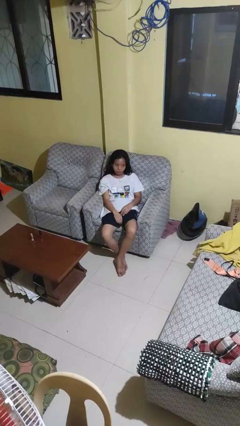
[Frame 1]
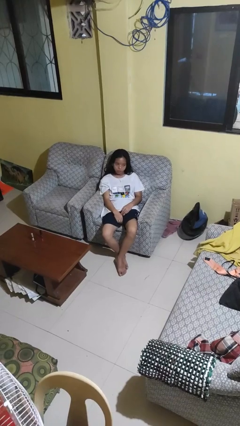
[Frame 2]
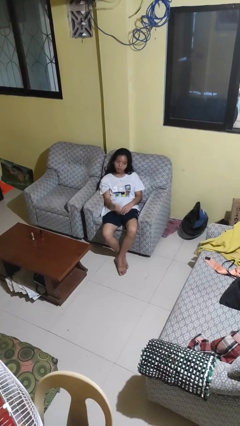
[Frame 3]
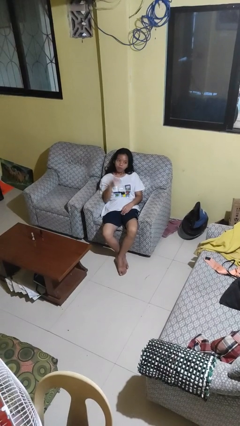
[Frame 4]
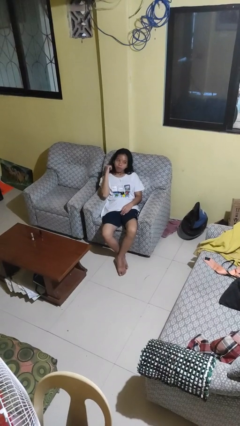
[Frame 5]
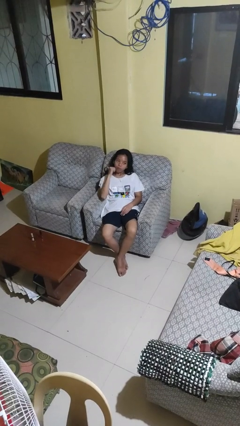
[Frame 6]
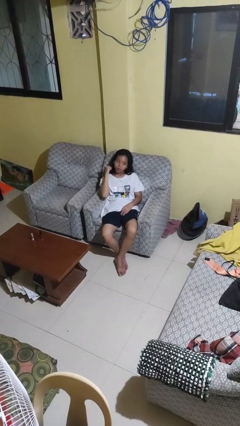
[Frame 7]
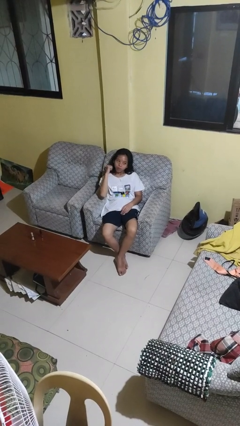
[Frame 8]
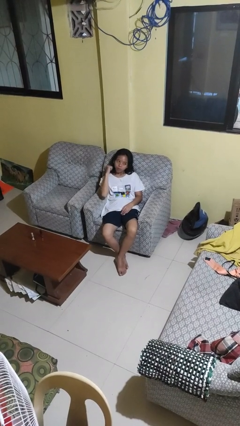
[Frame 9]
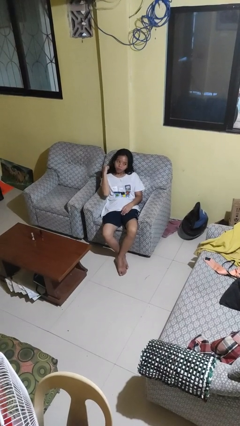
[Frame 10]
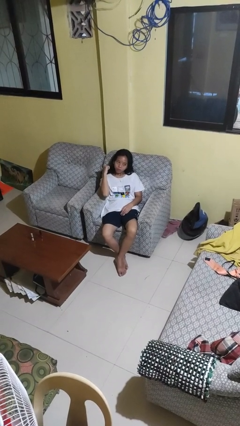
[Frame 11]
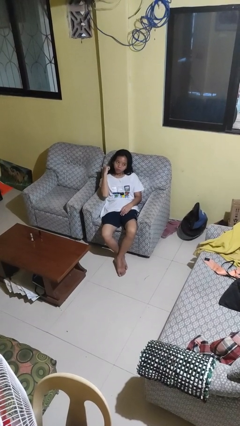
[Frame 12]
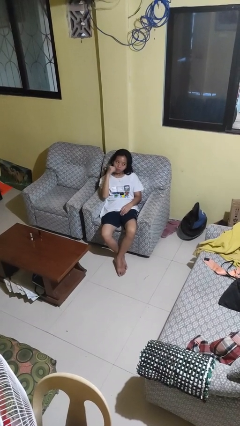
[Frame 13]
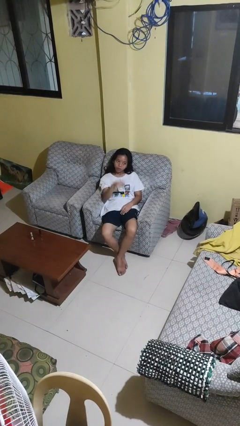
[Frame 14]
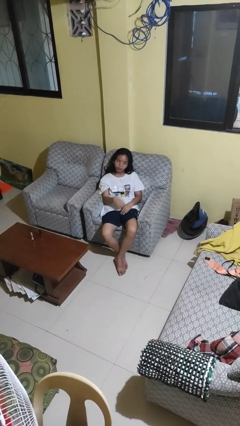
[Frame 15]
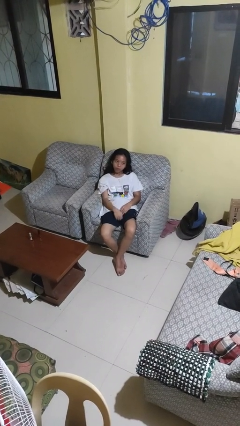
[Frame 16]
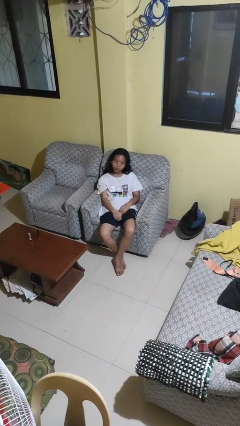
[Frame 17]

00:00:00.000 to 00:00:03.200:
person gestures behind me

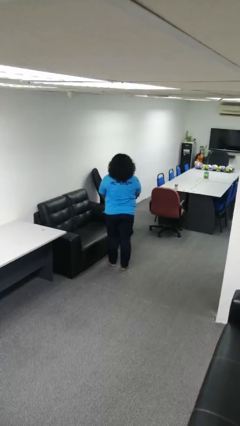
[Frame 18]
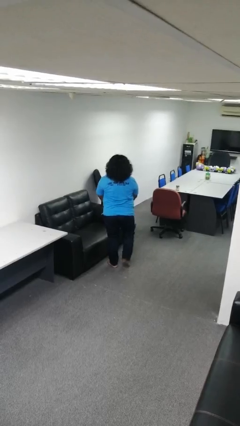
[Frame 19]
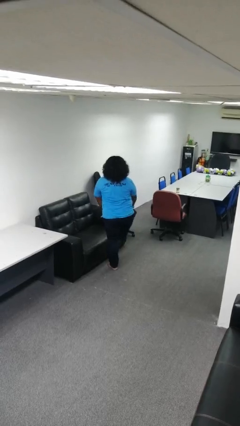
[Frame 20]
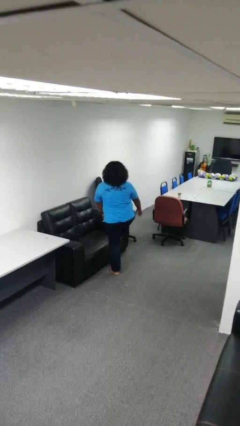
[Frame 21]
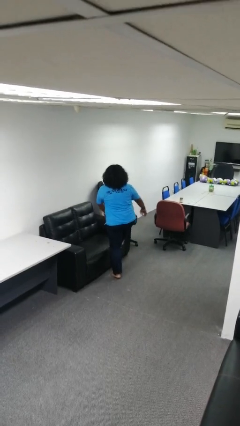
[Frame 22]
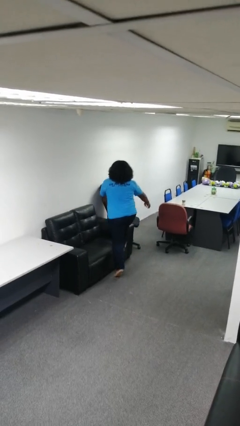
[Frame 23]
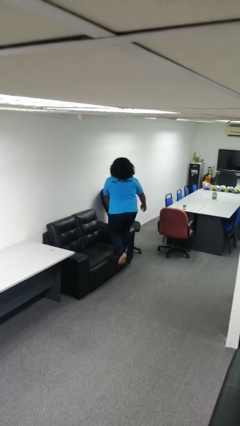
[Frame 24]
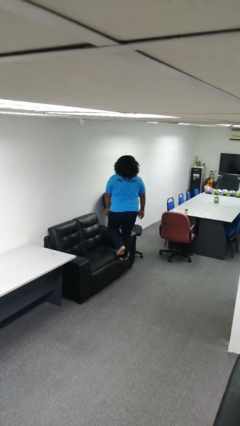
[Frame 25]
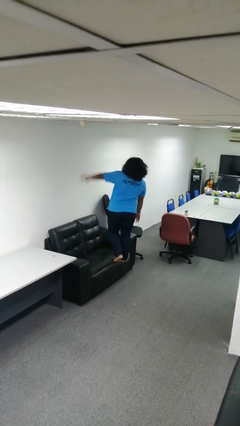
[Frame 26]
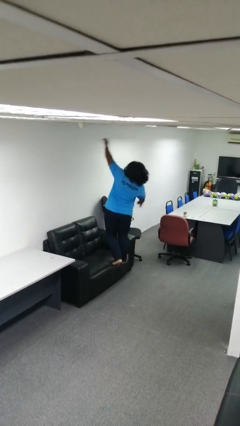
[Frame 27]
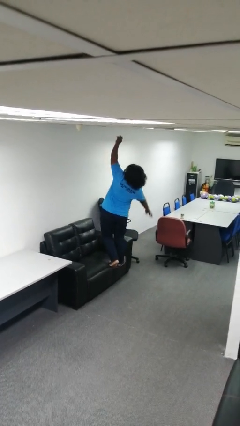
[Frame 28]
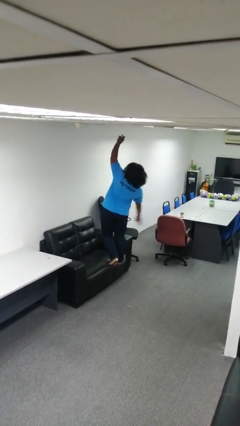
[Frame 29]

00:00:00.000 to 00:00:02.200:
person climbs on couch

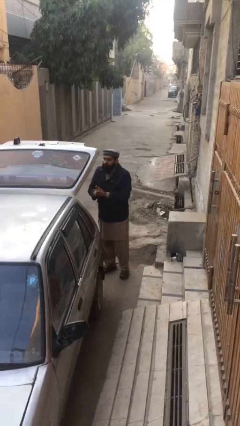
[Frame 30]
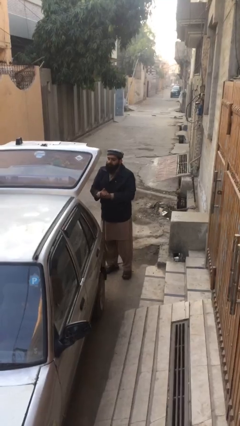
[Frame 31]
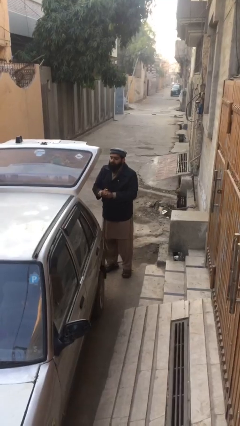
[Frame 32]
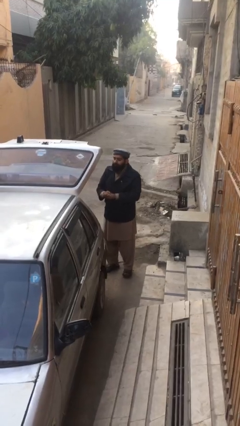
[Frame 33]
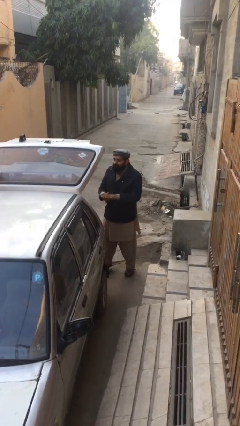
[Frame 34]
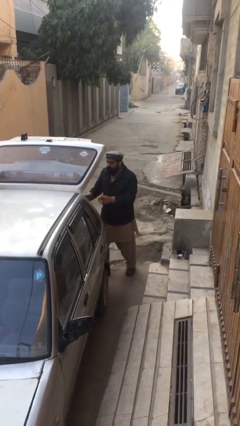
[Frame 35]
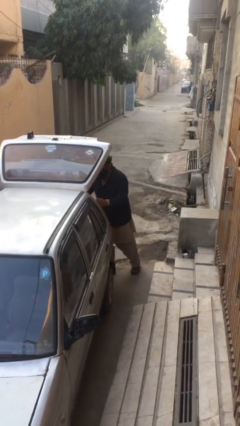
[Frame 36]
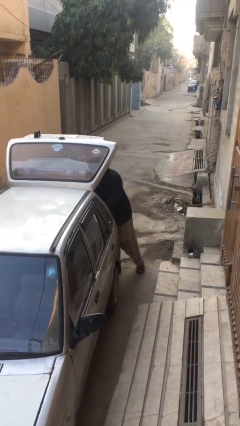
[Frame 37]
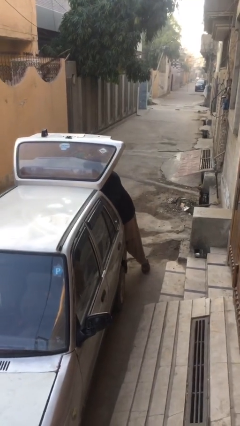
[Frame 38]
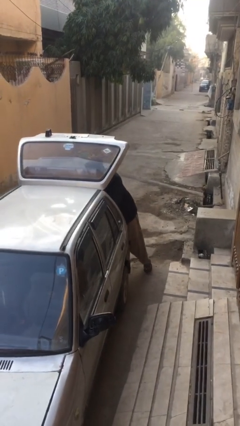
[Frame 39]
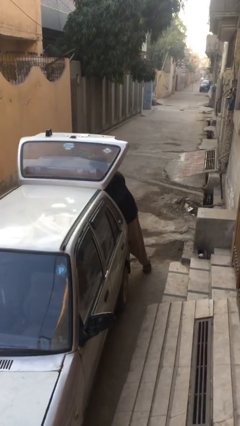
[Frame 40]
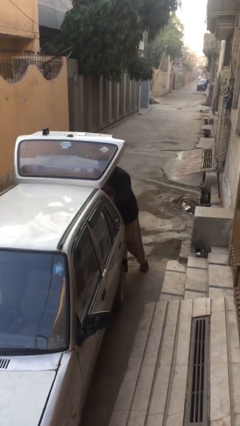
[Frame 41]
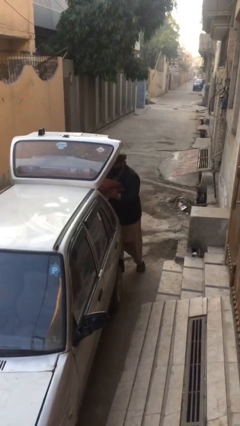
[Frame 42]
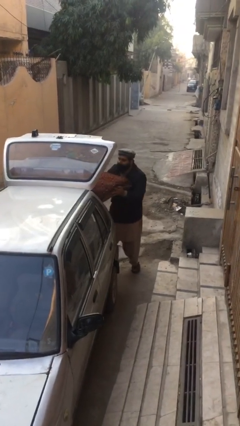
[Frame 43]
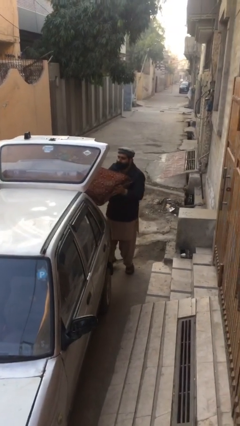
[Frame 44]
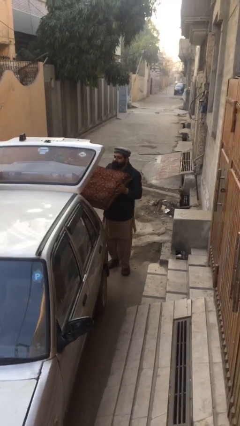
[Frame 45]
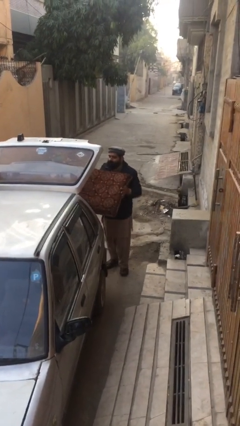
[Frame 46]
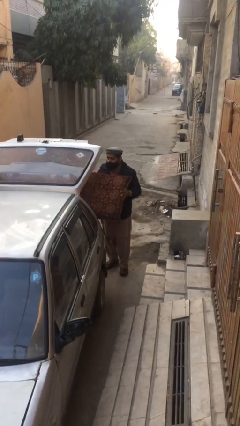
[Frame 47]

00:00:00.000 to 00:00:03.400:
person unloads car

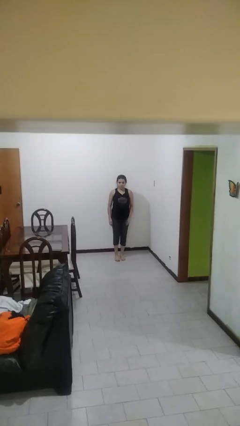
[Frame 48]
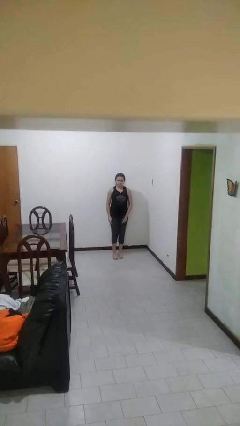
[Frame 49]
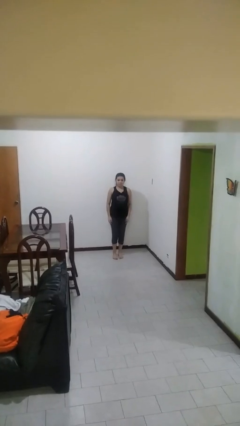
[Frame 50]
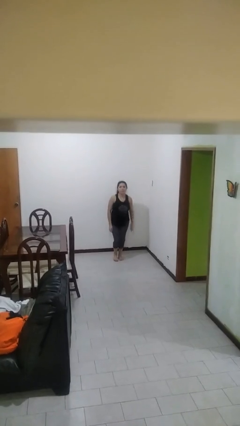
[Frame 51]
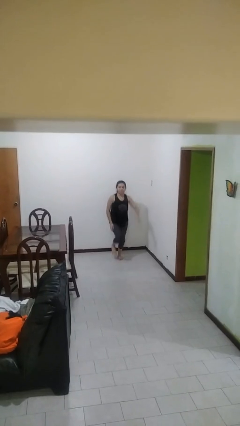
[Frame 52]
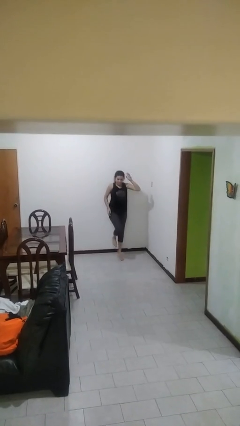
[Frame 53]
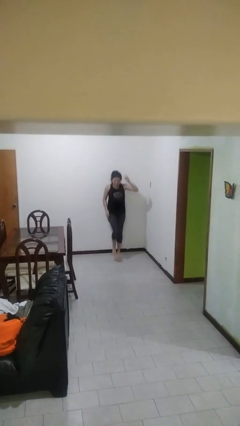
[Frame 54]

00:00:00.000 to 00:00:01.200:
person jumps

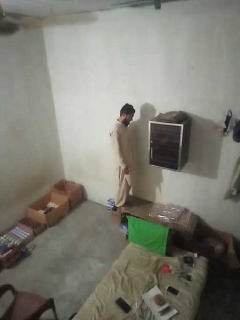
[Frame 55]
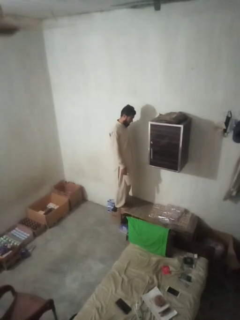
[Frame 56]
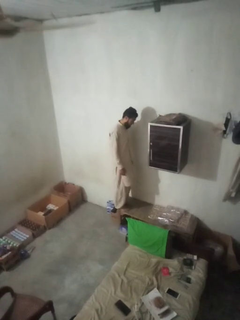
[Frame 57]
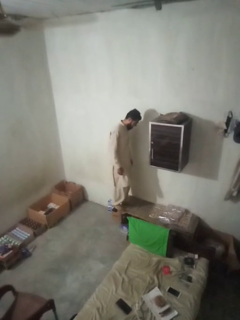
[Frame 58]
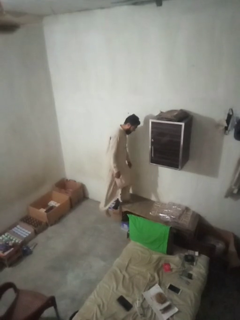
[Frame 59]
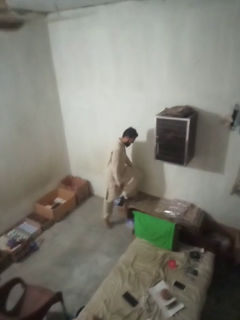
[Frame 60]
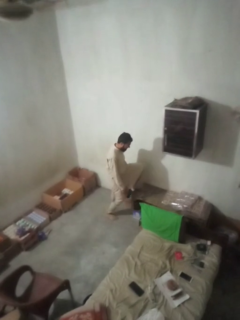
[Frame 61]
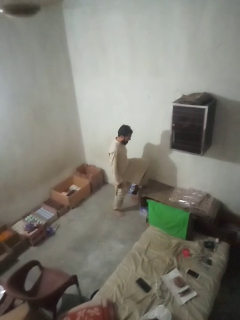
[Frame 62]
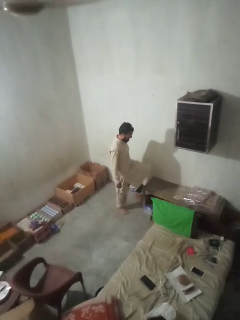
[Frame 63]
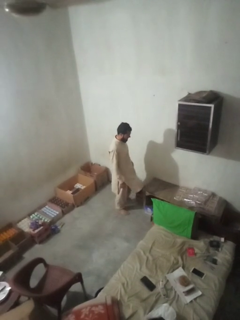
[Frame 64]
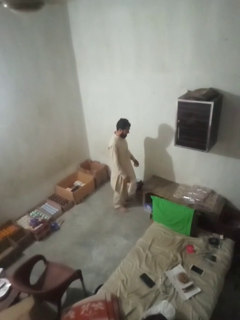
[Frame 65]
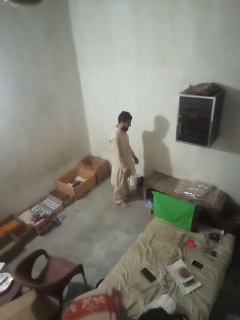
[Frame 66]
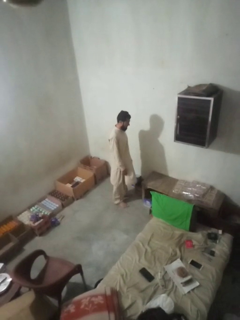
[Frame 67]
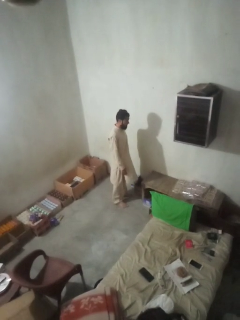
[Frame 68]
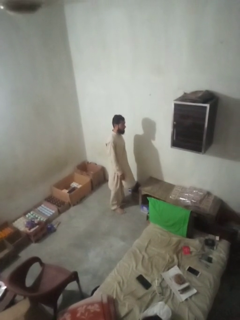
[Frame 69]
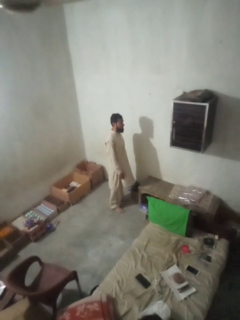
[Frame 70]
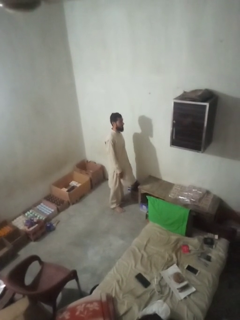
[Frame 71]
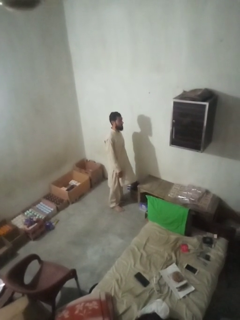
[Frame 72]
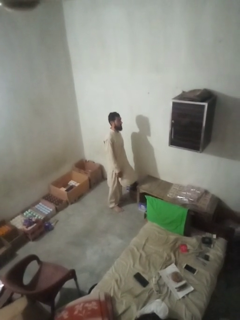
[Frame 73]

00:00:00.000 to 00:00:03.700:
person climbs off table

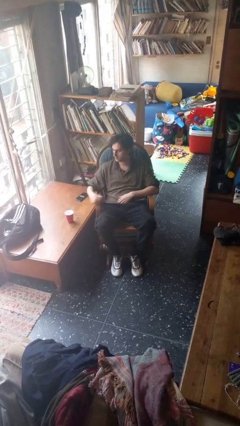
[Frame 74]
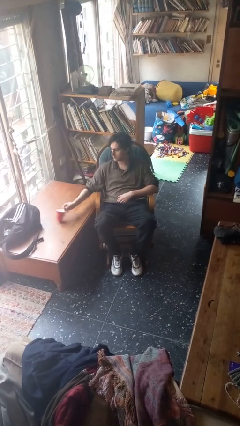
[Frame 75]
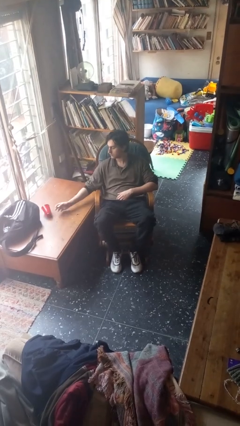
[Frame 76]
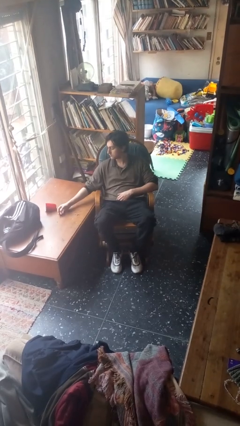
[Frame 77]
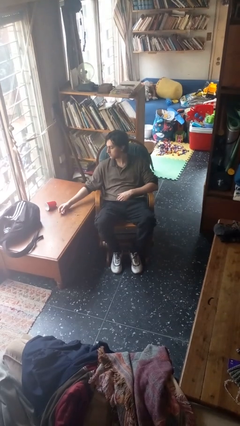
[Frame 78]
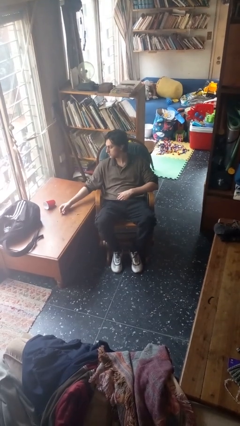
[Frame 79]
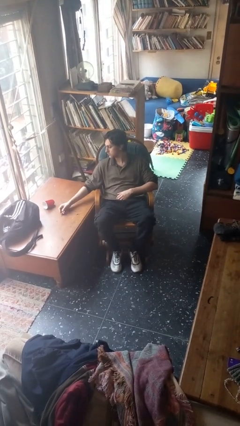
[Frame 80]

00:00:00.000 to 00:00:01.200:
person knocks over glass

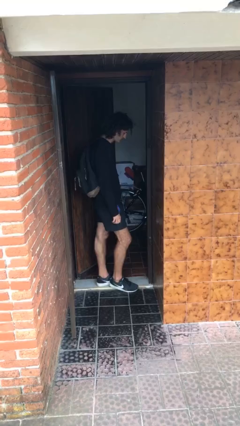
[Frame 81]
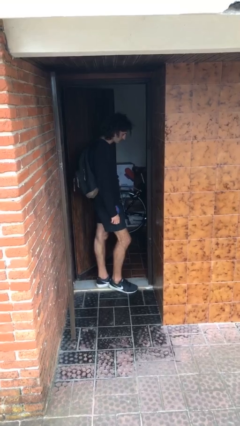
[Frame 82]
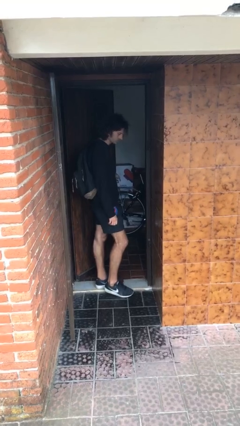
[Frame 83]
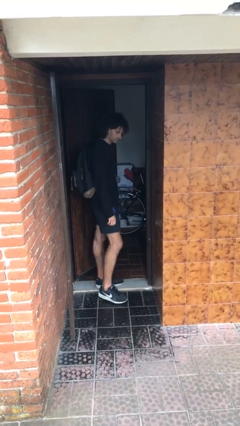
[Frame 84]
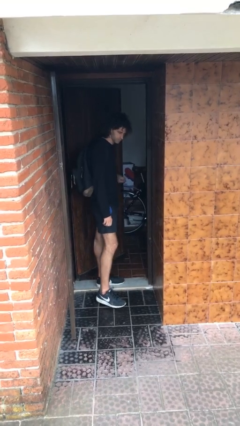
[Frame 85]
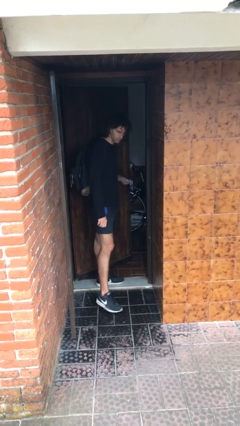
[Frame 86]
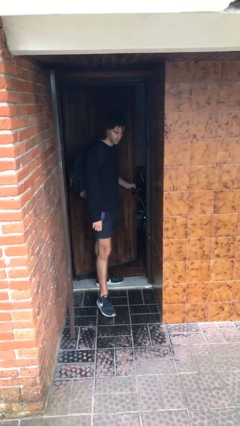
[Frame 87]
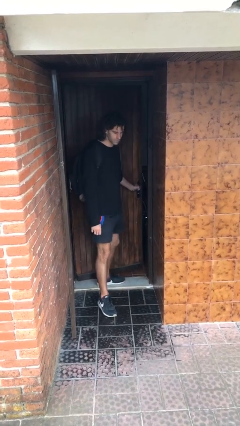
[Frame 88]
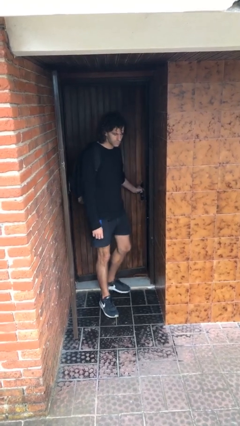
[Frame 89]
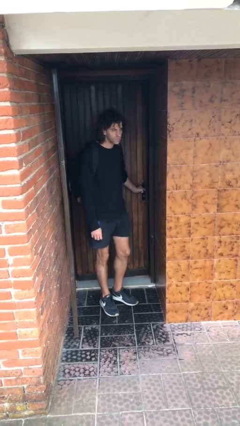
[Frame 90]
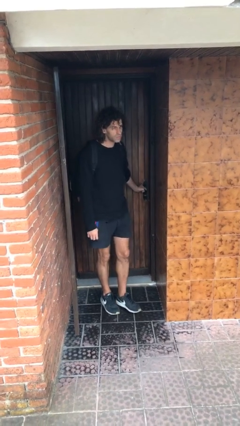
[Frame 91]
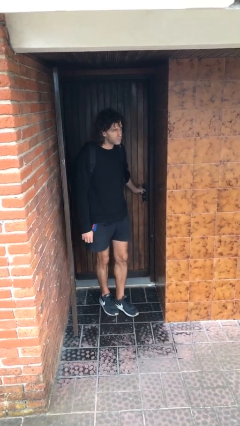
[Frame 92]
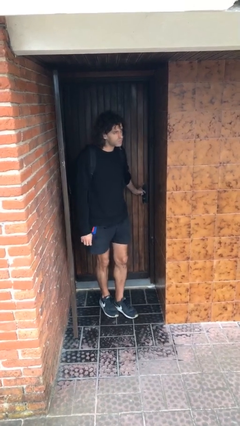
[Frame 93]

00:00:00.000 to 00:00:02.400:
person closes facility door

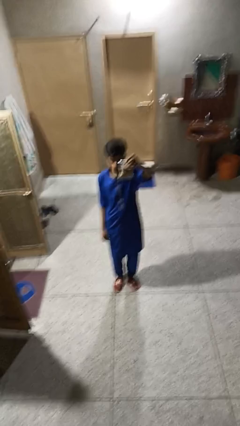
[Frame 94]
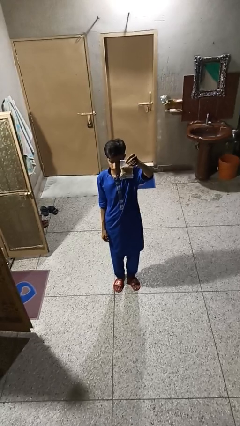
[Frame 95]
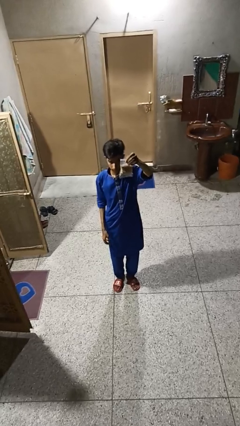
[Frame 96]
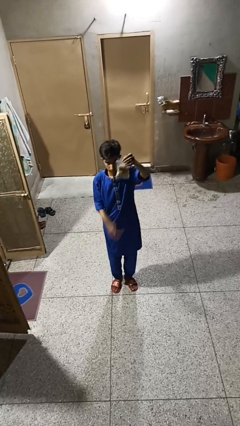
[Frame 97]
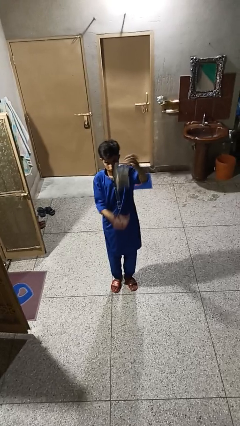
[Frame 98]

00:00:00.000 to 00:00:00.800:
person drops object
